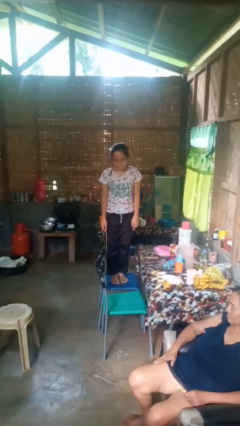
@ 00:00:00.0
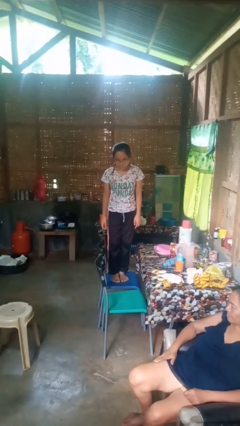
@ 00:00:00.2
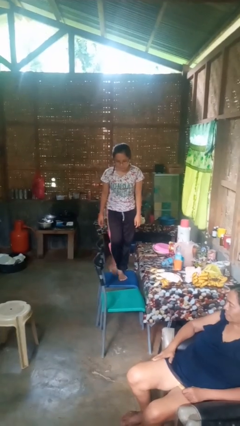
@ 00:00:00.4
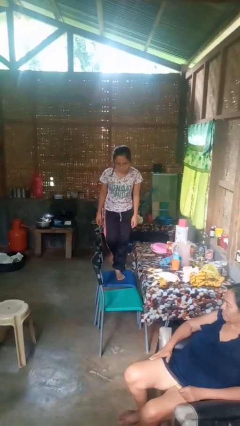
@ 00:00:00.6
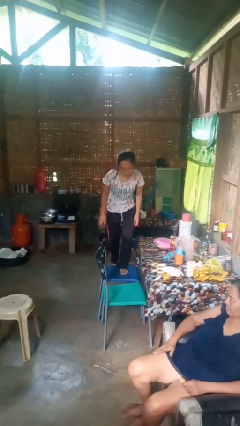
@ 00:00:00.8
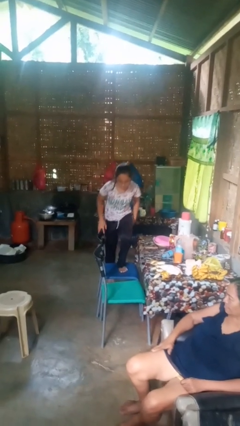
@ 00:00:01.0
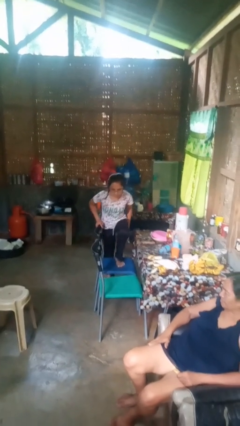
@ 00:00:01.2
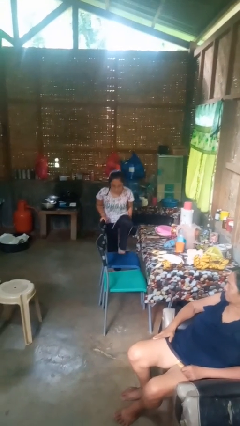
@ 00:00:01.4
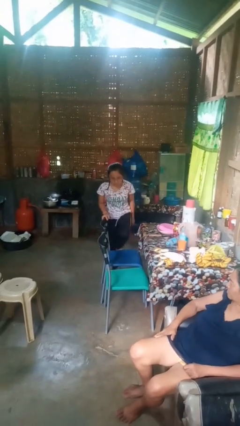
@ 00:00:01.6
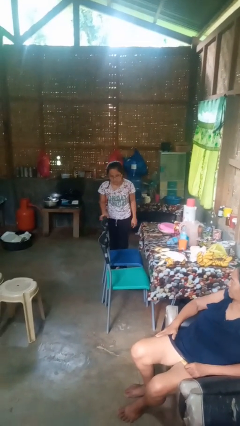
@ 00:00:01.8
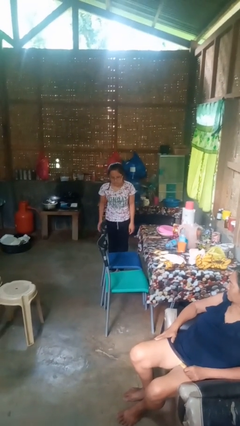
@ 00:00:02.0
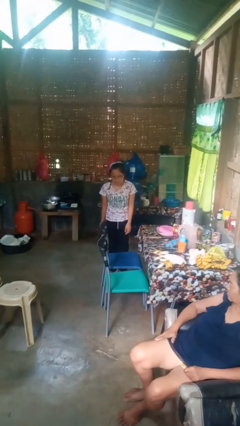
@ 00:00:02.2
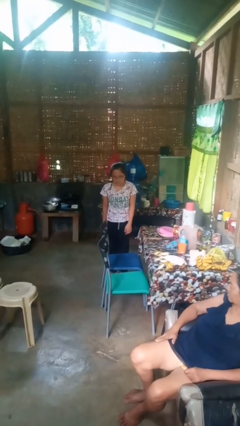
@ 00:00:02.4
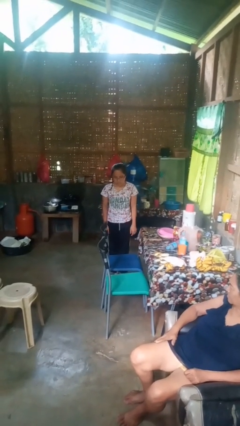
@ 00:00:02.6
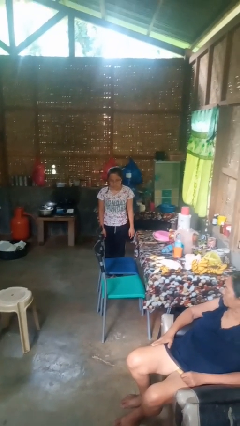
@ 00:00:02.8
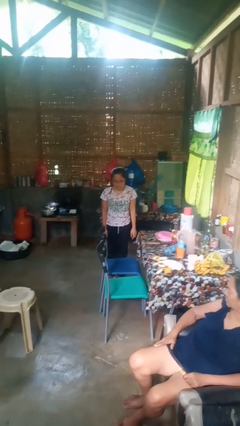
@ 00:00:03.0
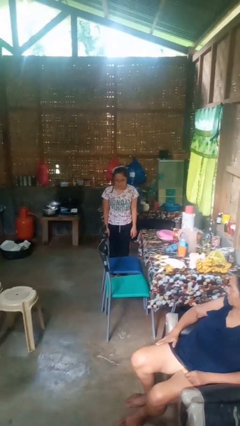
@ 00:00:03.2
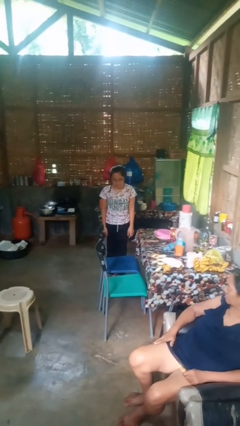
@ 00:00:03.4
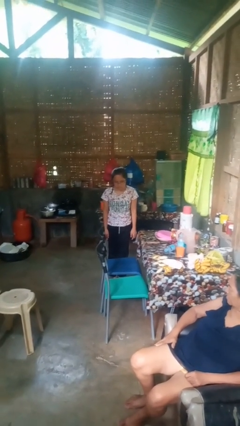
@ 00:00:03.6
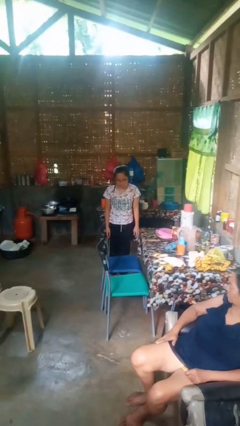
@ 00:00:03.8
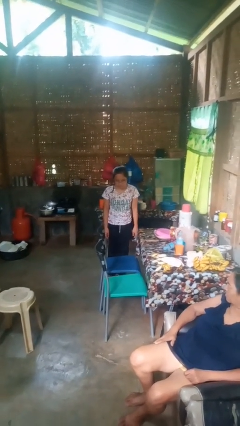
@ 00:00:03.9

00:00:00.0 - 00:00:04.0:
person climbs off chair

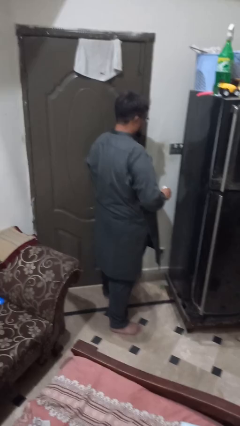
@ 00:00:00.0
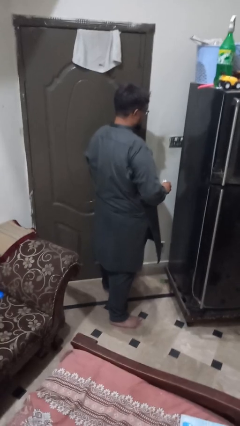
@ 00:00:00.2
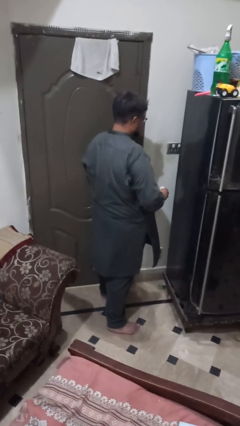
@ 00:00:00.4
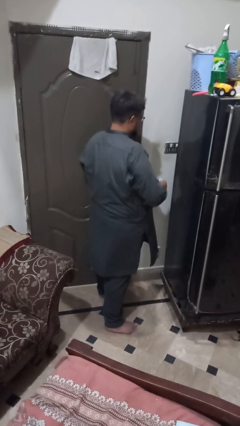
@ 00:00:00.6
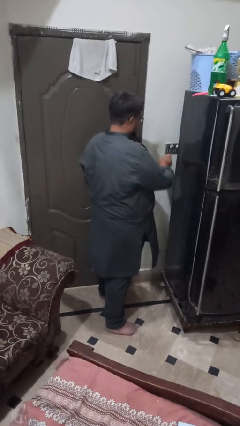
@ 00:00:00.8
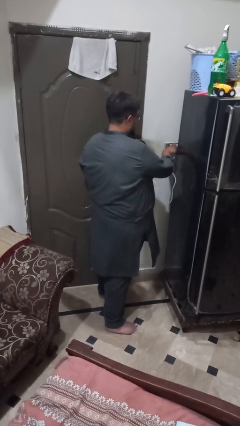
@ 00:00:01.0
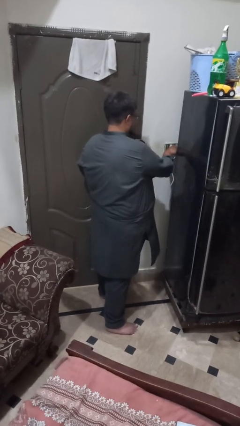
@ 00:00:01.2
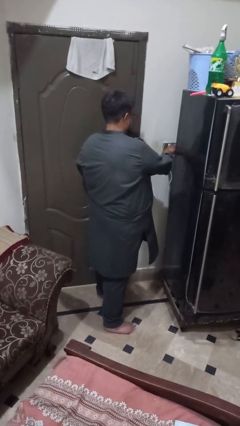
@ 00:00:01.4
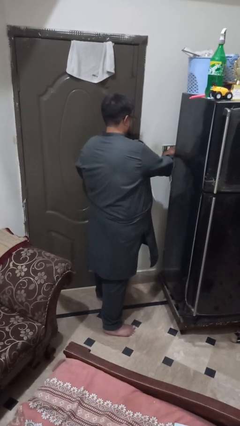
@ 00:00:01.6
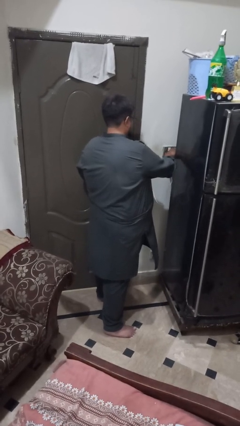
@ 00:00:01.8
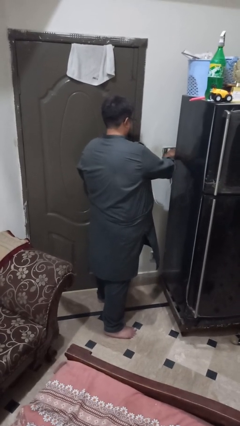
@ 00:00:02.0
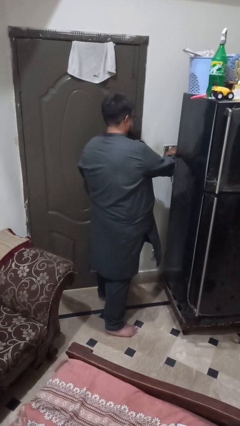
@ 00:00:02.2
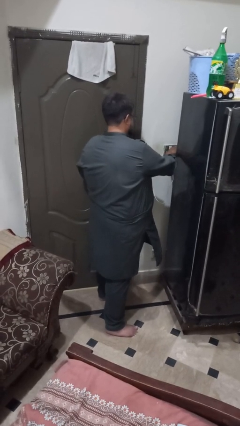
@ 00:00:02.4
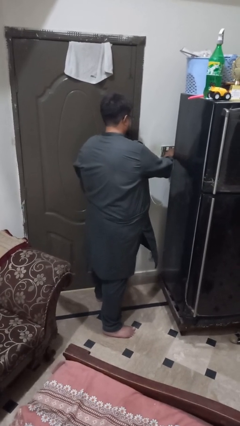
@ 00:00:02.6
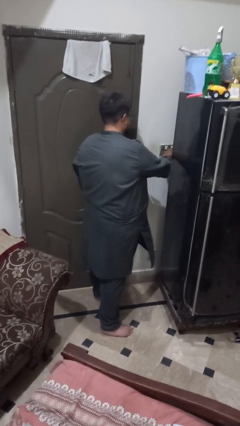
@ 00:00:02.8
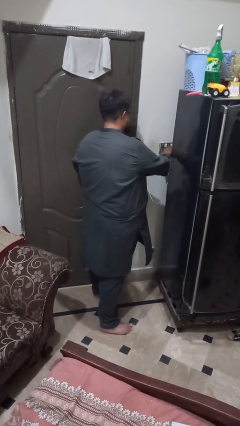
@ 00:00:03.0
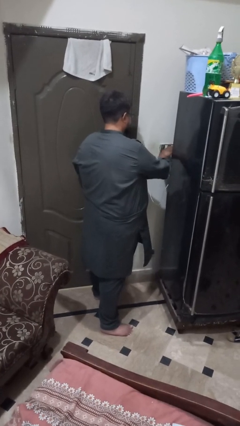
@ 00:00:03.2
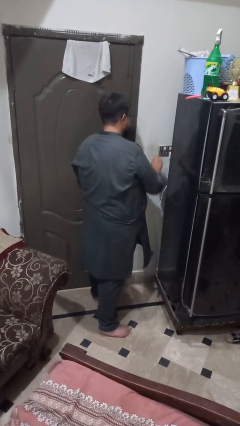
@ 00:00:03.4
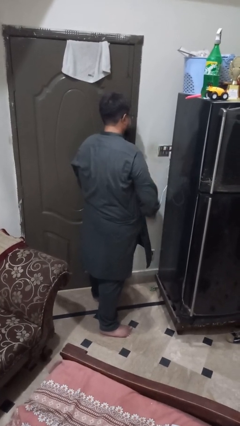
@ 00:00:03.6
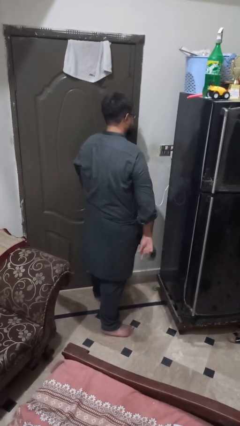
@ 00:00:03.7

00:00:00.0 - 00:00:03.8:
person plugs into electrical socket

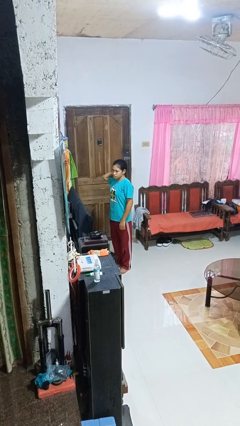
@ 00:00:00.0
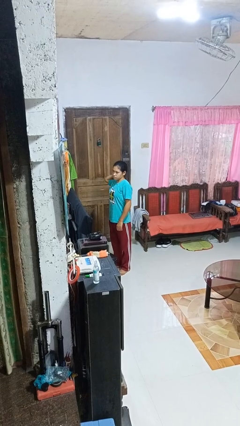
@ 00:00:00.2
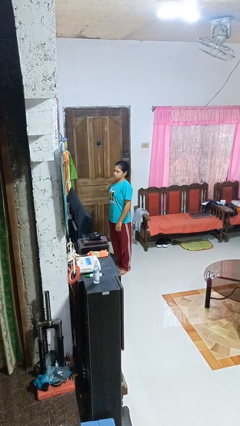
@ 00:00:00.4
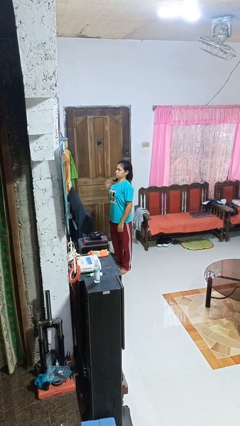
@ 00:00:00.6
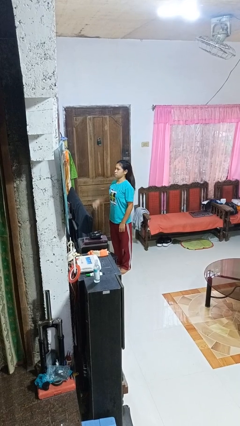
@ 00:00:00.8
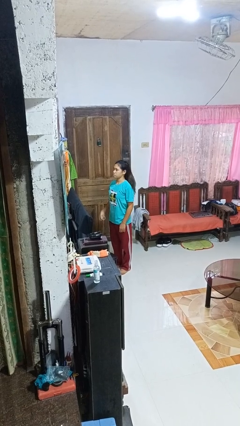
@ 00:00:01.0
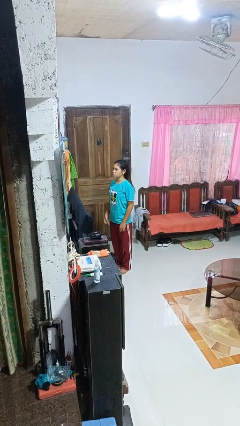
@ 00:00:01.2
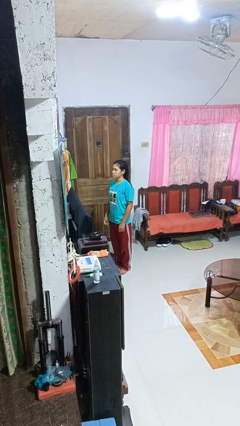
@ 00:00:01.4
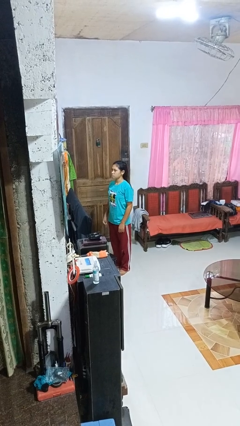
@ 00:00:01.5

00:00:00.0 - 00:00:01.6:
person takes off hairtie

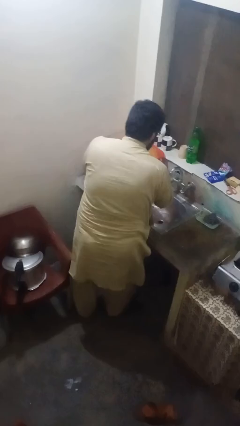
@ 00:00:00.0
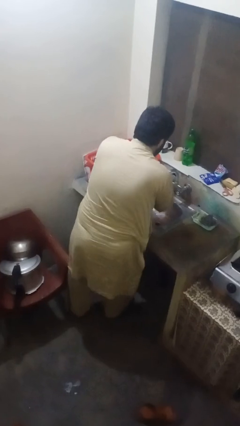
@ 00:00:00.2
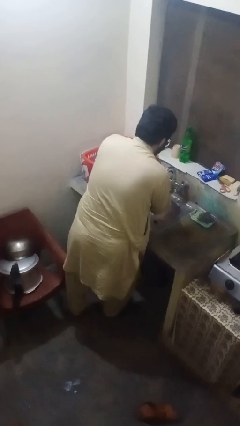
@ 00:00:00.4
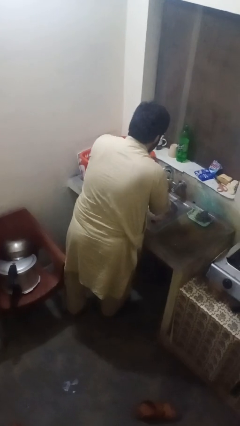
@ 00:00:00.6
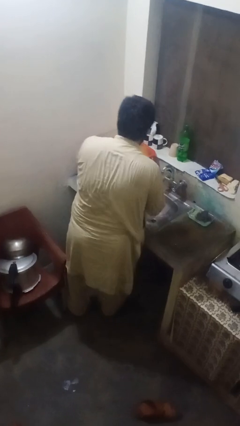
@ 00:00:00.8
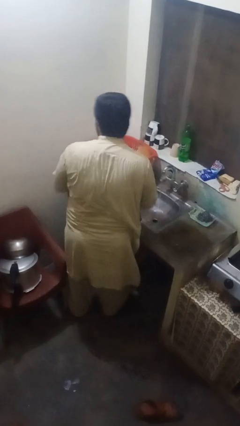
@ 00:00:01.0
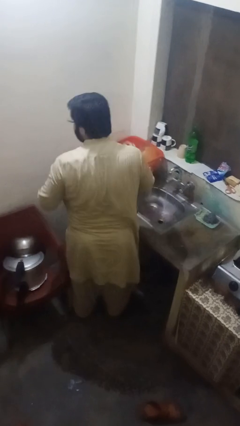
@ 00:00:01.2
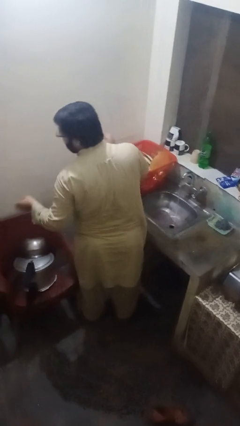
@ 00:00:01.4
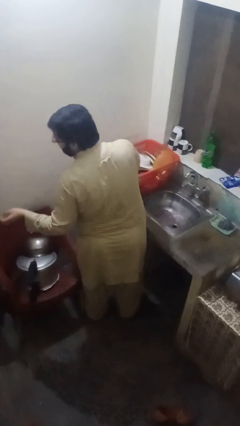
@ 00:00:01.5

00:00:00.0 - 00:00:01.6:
person washes hands

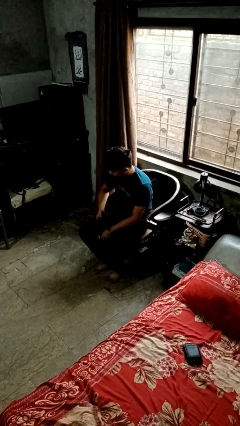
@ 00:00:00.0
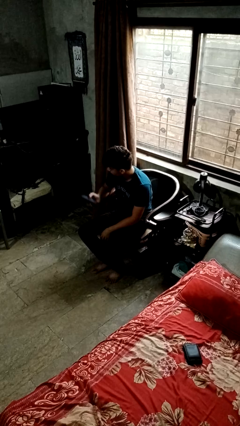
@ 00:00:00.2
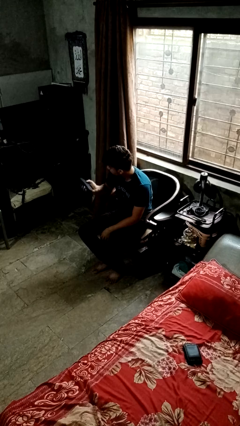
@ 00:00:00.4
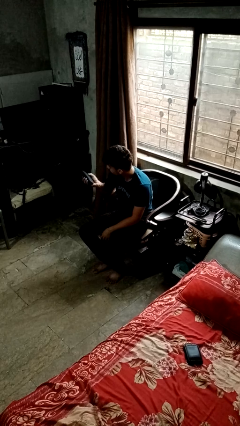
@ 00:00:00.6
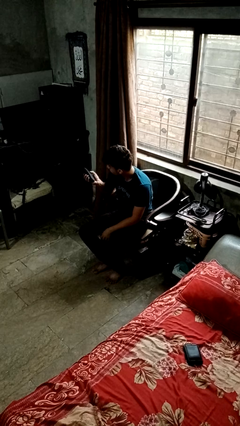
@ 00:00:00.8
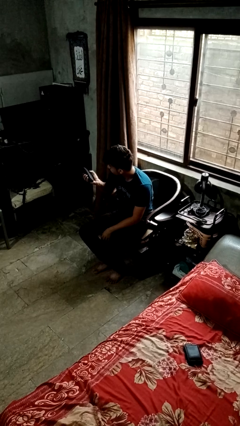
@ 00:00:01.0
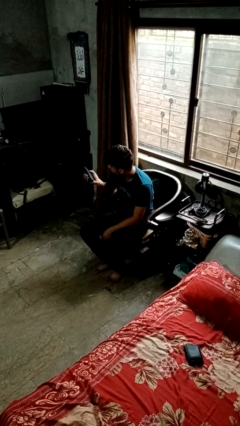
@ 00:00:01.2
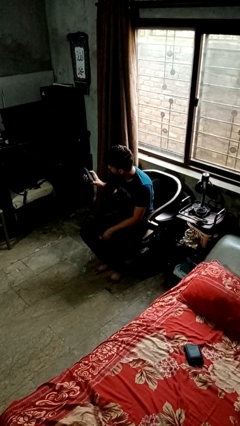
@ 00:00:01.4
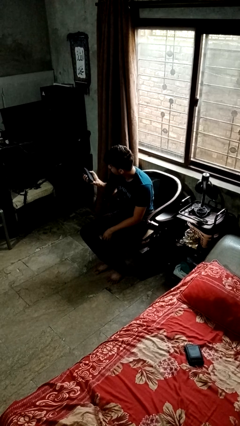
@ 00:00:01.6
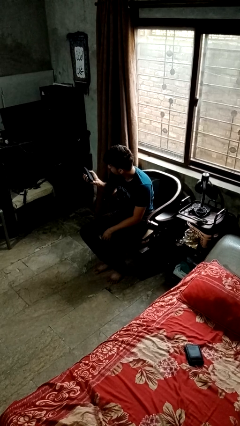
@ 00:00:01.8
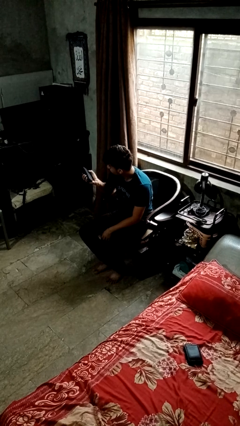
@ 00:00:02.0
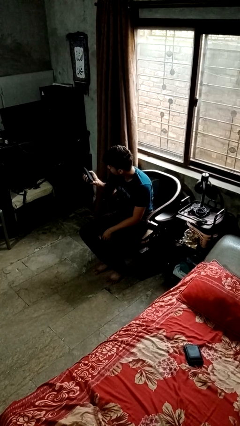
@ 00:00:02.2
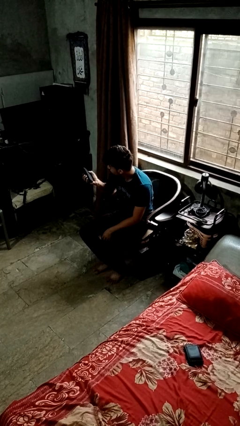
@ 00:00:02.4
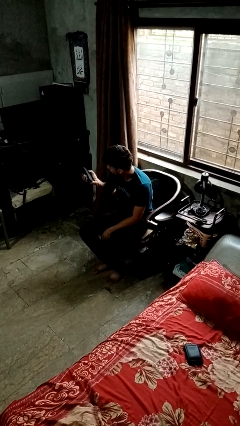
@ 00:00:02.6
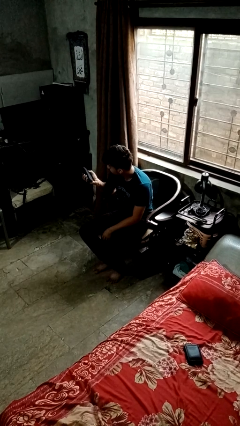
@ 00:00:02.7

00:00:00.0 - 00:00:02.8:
person uses television remote

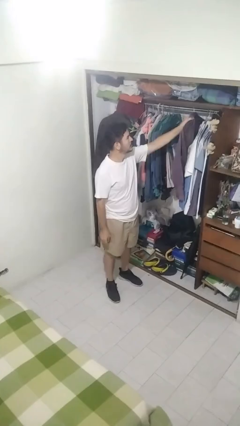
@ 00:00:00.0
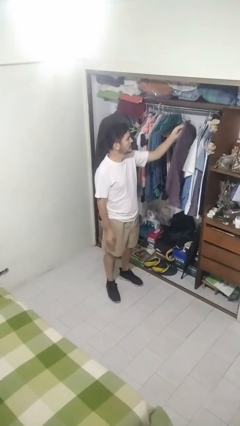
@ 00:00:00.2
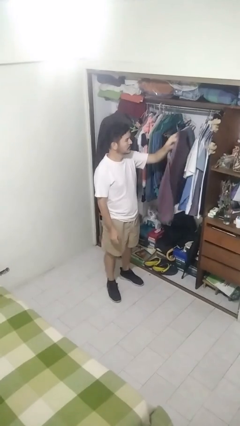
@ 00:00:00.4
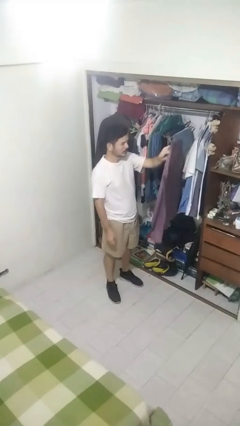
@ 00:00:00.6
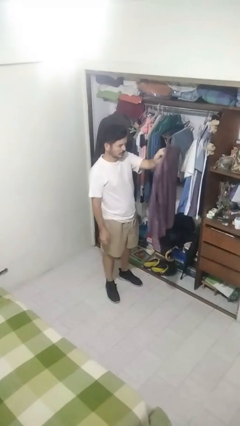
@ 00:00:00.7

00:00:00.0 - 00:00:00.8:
person takes clothes from closet

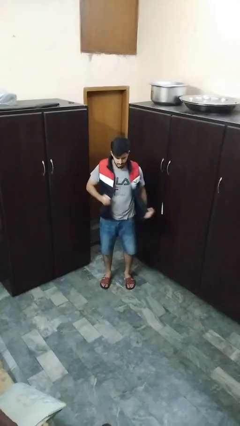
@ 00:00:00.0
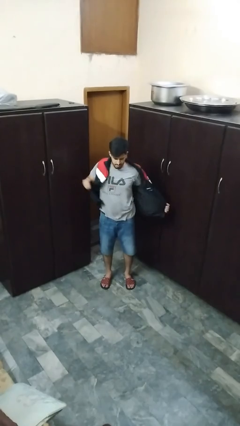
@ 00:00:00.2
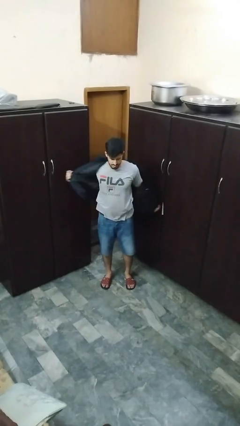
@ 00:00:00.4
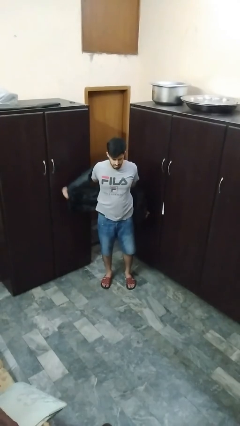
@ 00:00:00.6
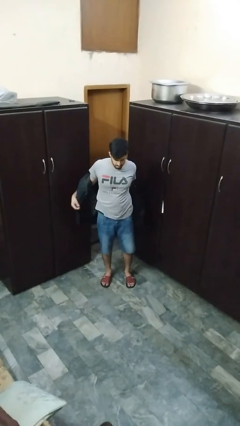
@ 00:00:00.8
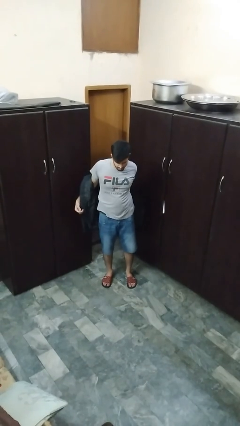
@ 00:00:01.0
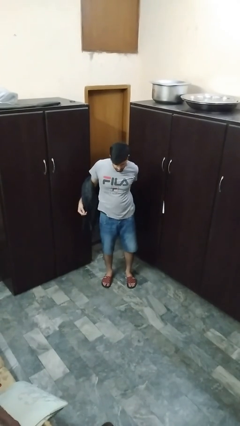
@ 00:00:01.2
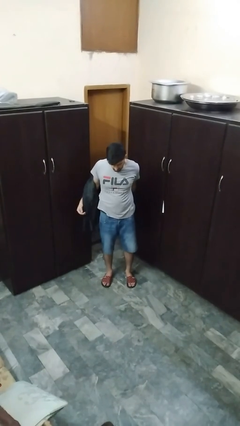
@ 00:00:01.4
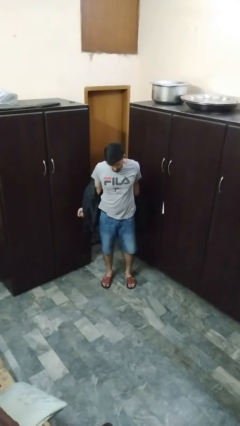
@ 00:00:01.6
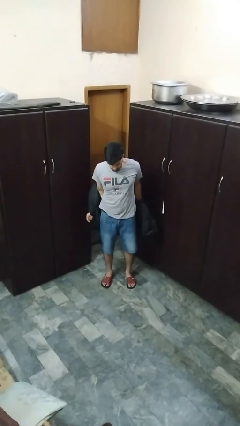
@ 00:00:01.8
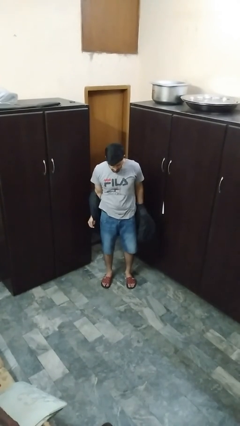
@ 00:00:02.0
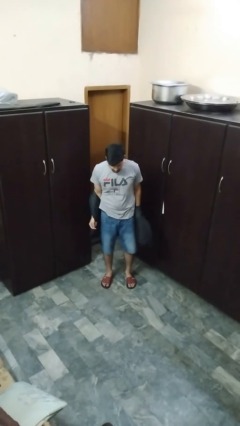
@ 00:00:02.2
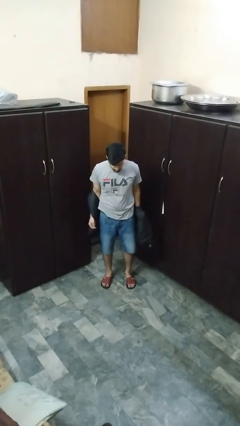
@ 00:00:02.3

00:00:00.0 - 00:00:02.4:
person takes off jacket
